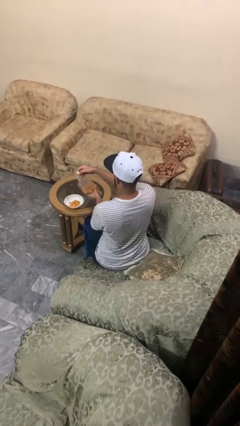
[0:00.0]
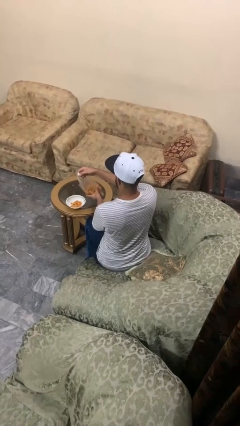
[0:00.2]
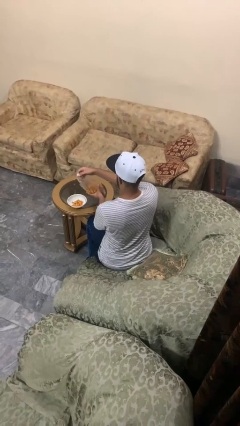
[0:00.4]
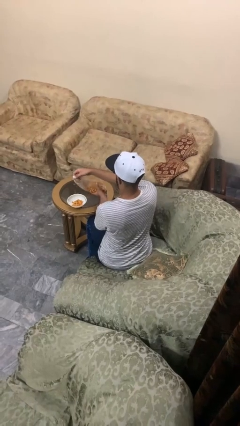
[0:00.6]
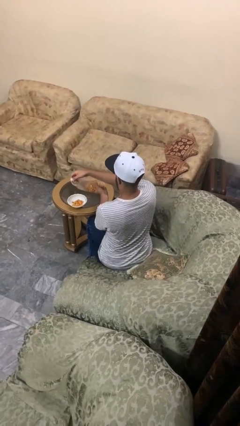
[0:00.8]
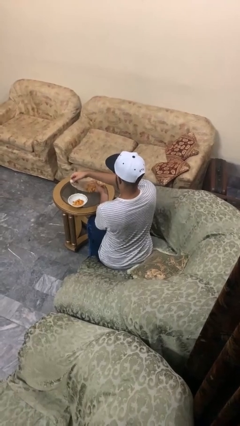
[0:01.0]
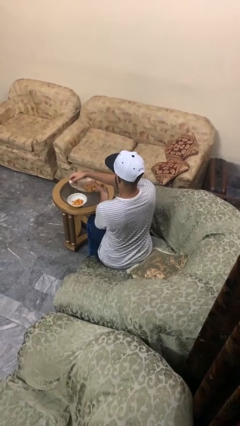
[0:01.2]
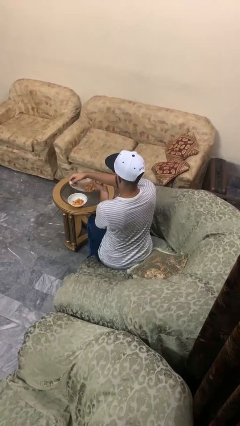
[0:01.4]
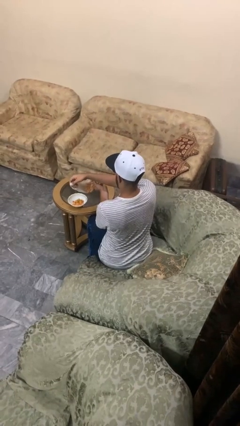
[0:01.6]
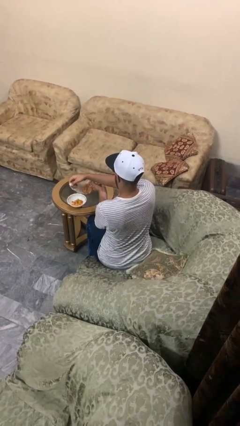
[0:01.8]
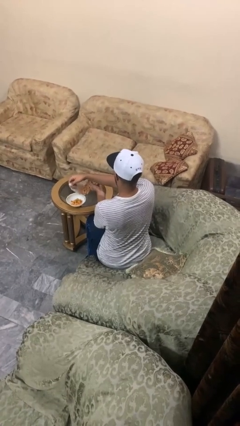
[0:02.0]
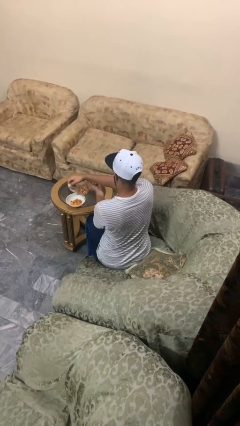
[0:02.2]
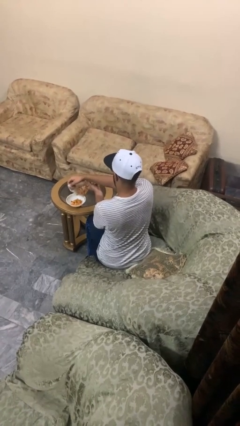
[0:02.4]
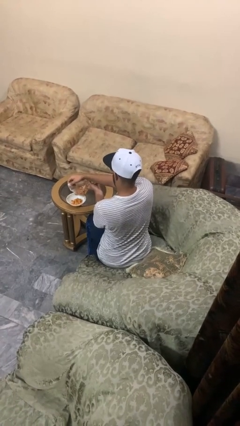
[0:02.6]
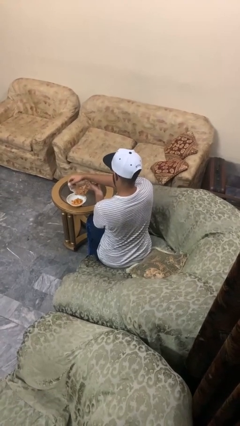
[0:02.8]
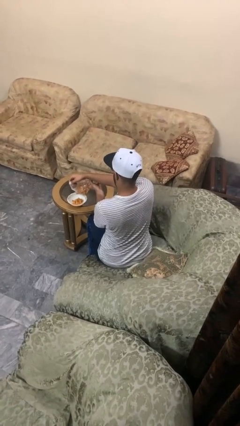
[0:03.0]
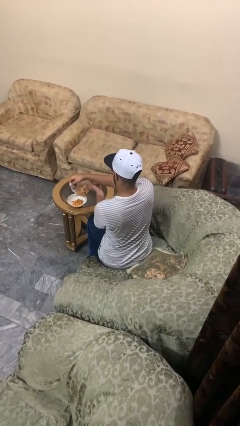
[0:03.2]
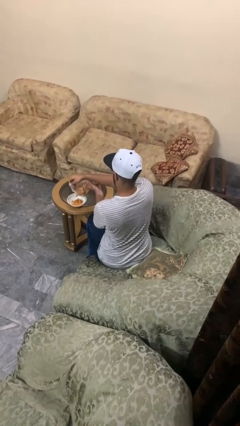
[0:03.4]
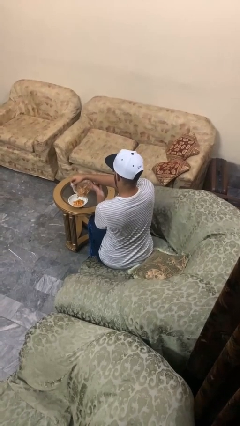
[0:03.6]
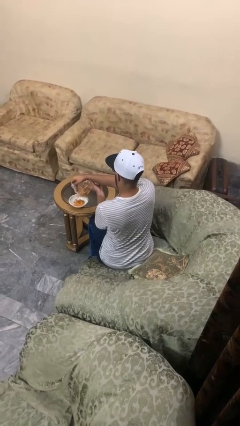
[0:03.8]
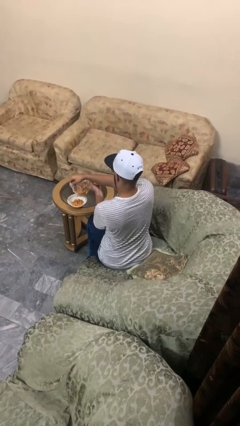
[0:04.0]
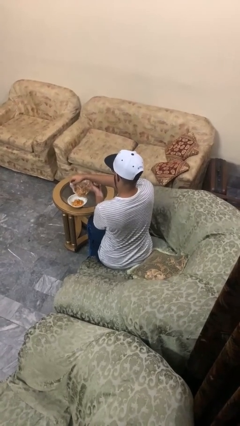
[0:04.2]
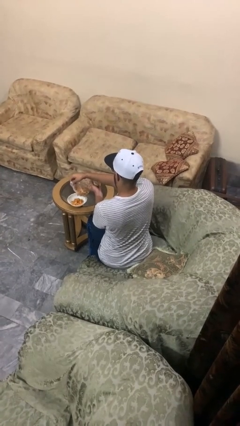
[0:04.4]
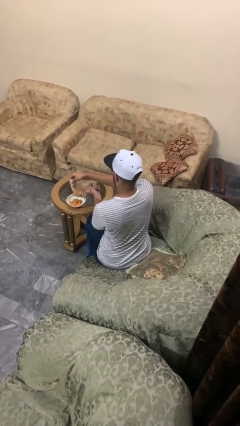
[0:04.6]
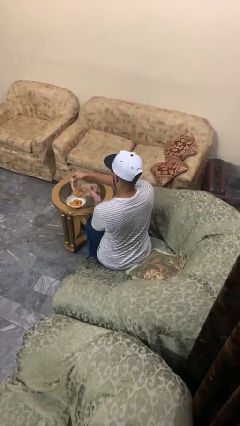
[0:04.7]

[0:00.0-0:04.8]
person pours into bowl

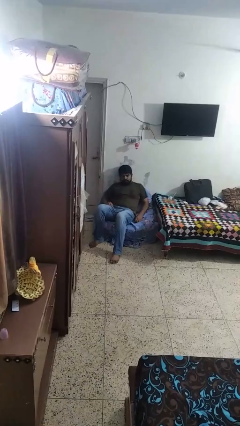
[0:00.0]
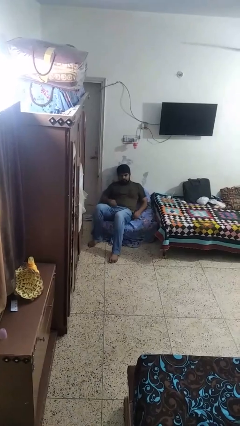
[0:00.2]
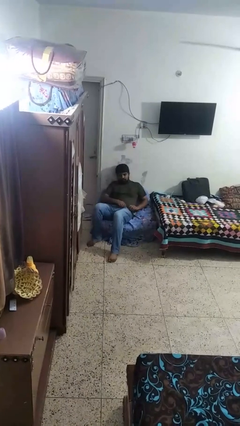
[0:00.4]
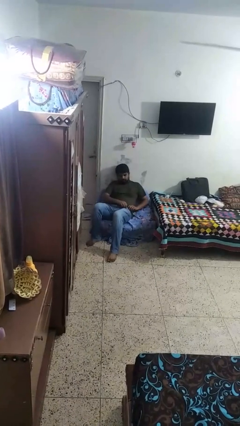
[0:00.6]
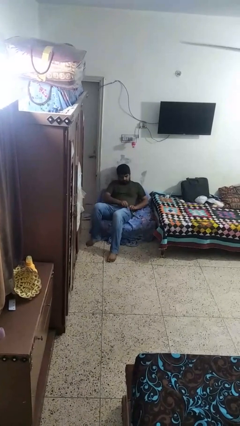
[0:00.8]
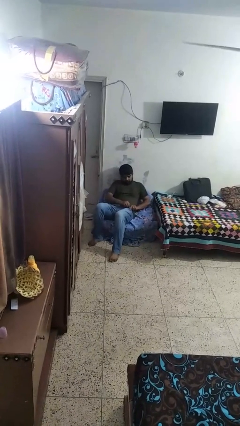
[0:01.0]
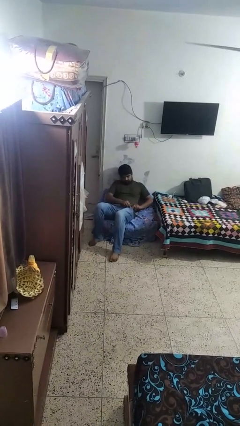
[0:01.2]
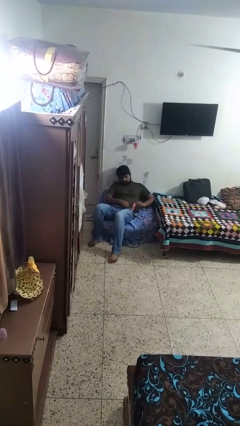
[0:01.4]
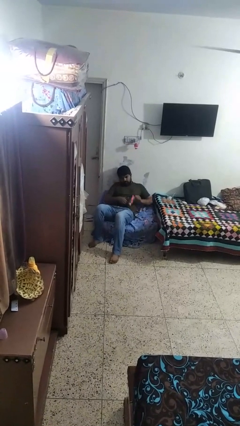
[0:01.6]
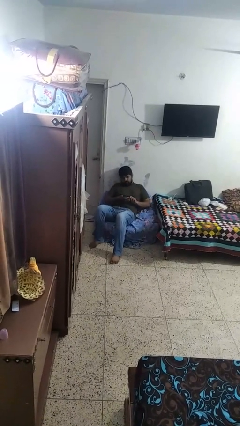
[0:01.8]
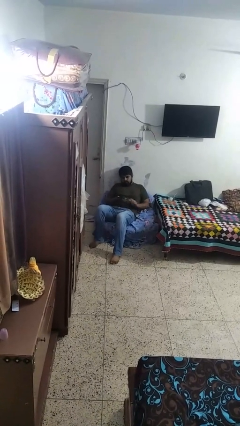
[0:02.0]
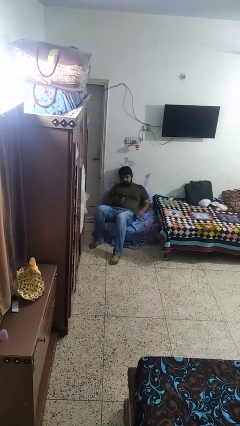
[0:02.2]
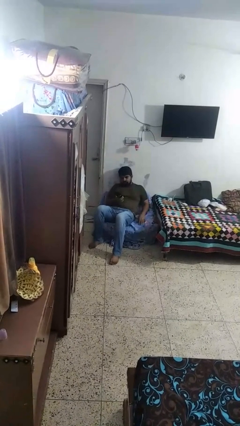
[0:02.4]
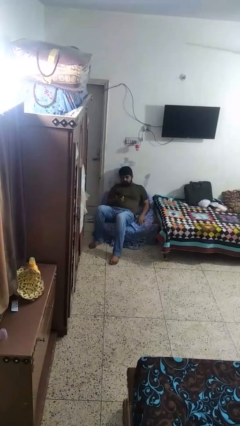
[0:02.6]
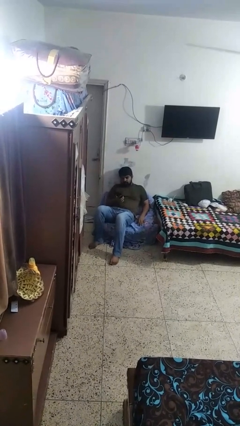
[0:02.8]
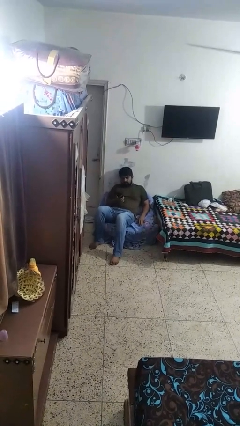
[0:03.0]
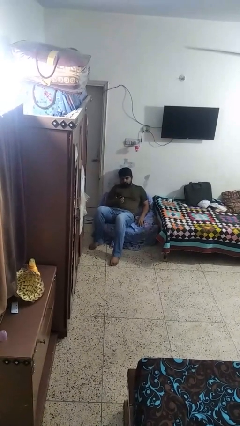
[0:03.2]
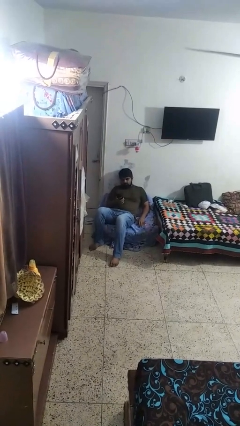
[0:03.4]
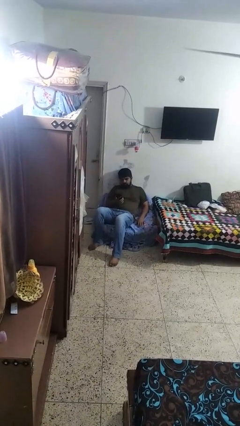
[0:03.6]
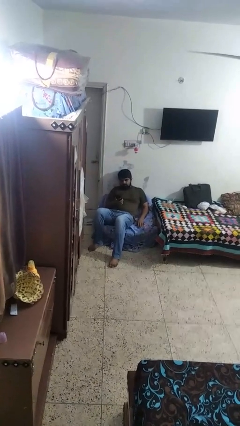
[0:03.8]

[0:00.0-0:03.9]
person takes phone from pocket

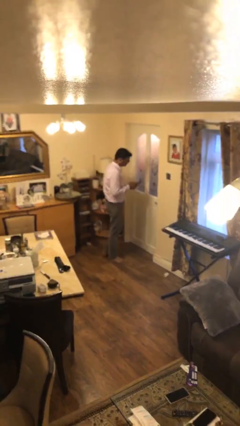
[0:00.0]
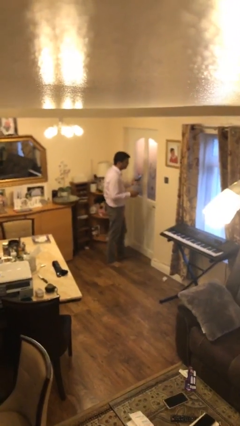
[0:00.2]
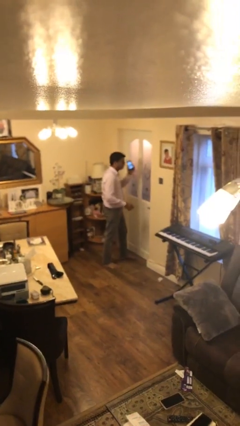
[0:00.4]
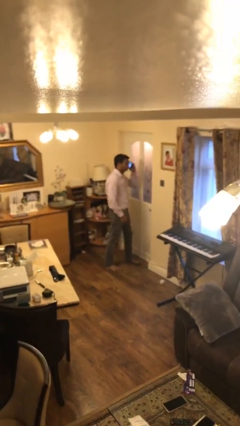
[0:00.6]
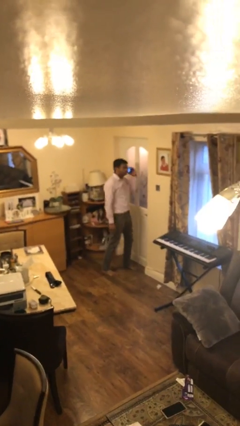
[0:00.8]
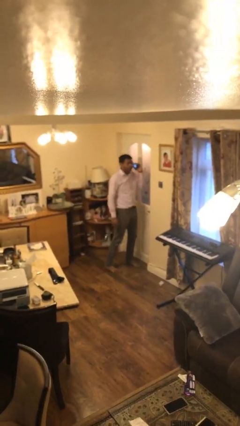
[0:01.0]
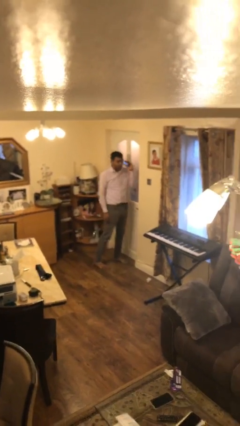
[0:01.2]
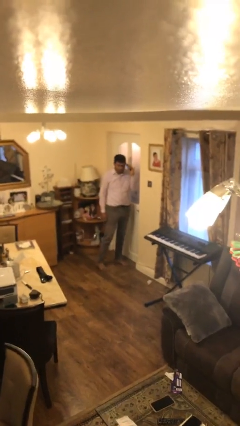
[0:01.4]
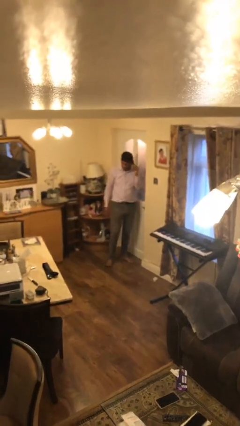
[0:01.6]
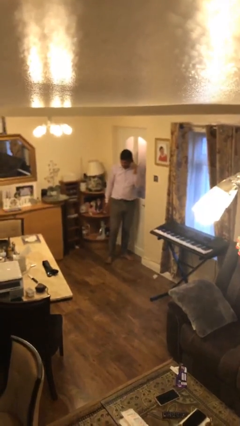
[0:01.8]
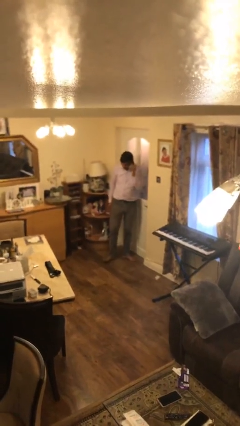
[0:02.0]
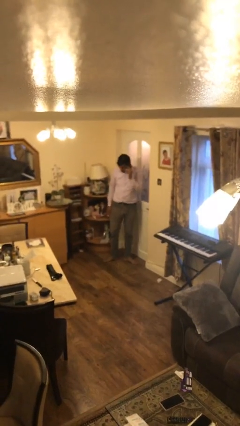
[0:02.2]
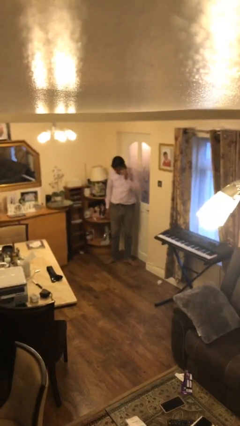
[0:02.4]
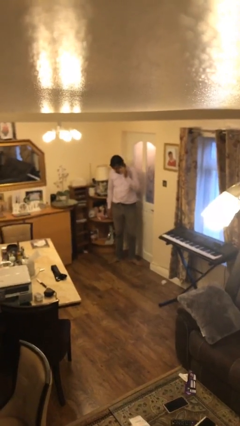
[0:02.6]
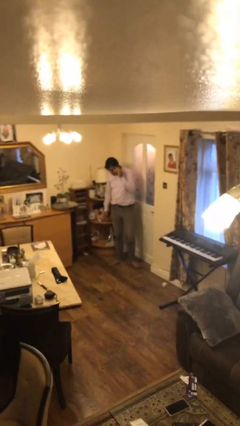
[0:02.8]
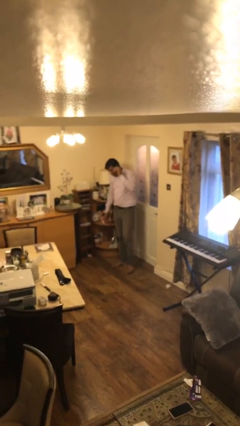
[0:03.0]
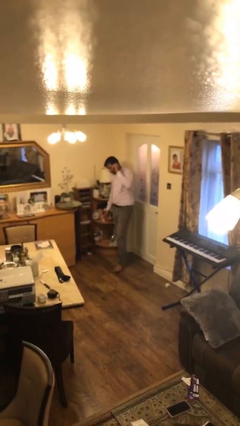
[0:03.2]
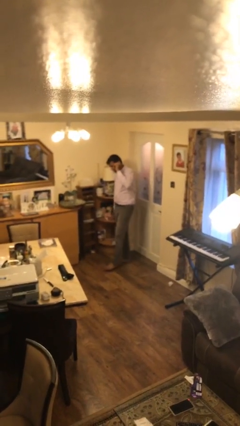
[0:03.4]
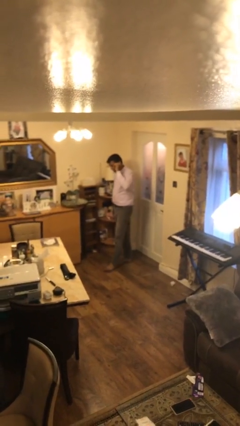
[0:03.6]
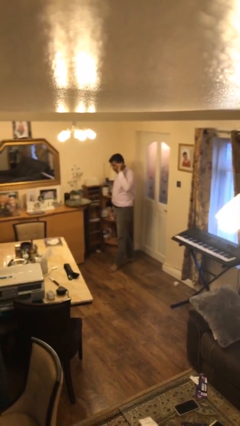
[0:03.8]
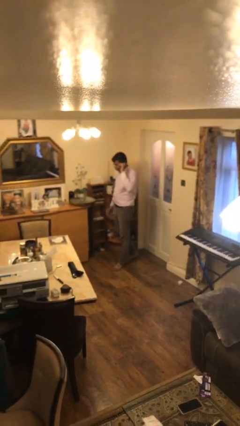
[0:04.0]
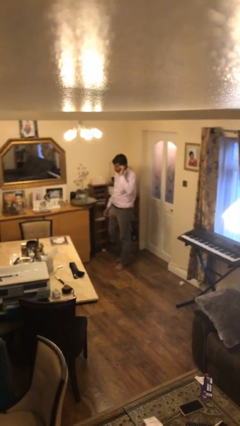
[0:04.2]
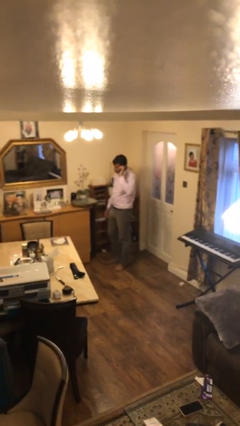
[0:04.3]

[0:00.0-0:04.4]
person talks on phone

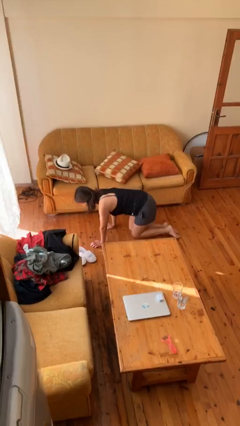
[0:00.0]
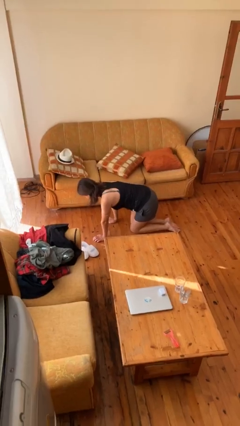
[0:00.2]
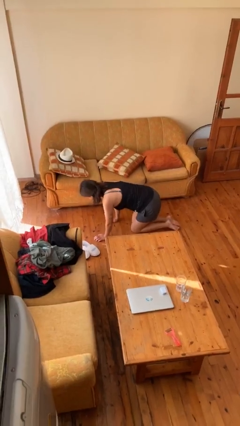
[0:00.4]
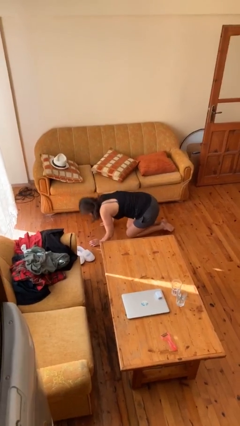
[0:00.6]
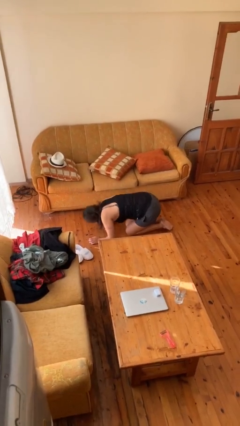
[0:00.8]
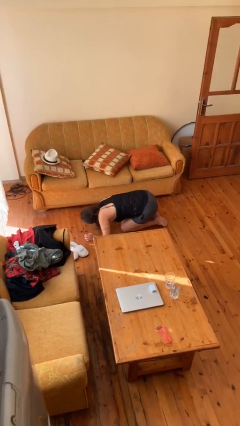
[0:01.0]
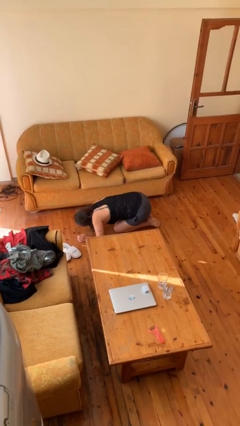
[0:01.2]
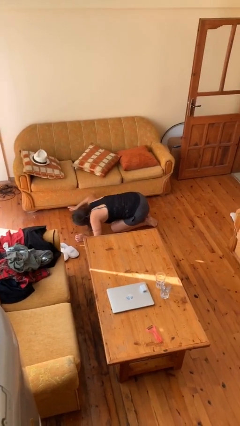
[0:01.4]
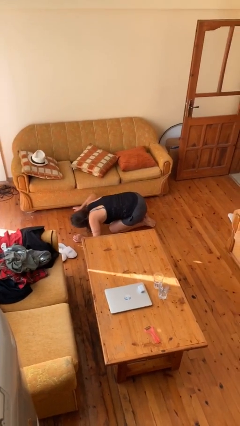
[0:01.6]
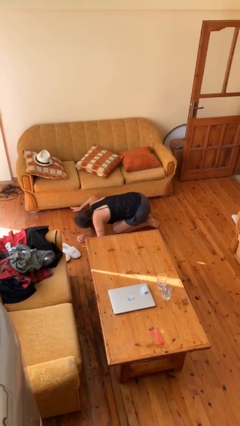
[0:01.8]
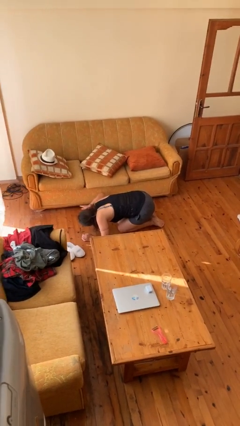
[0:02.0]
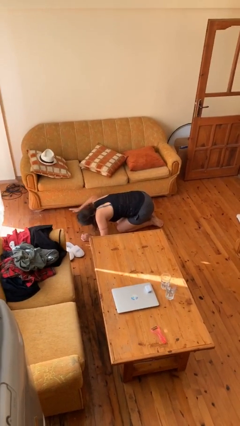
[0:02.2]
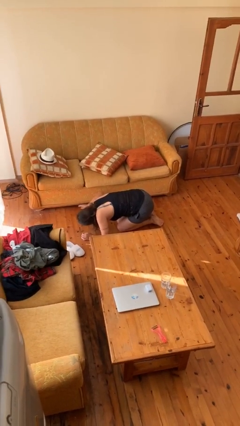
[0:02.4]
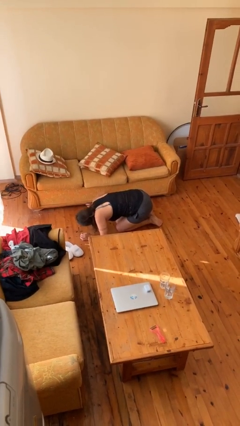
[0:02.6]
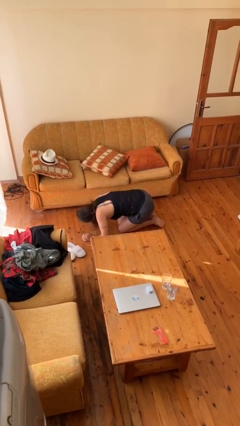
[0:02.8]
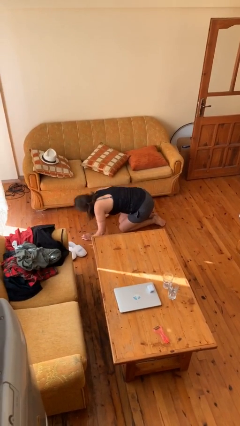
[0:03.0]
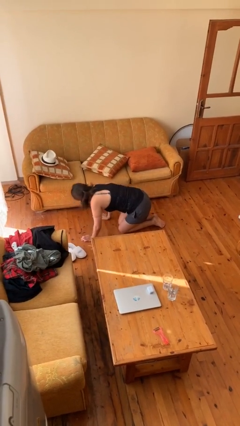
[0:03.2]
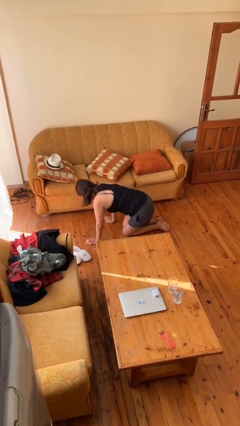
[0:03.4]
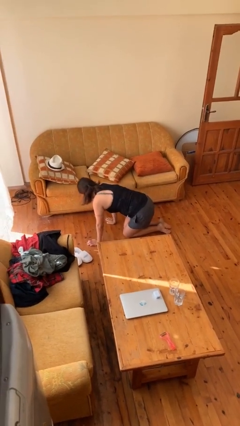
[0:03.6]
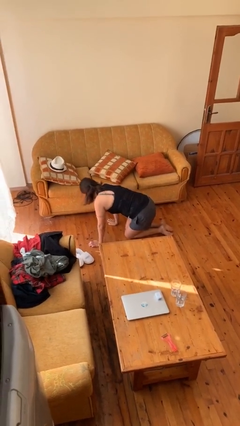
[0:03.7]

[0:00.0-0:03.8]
person searches under couch

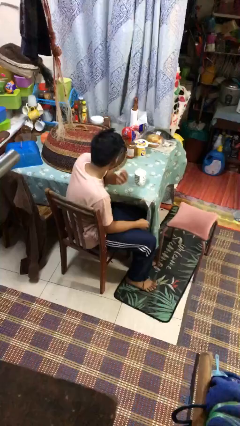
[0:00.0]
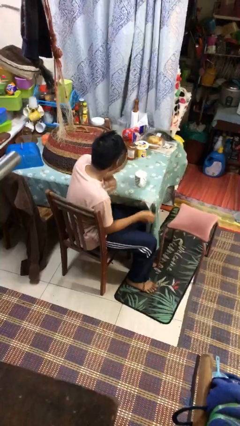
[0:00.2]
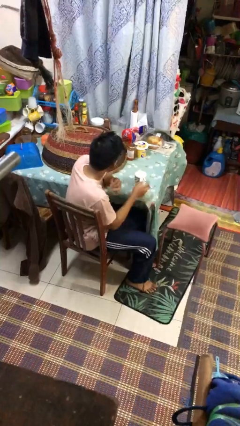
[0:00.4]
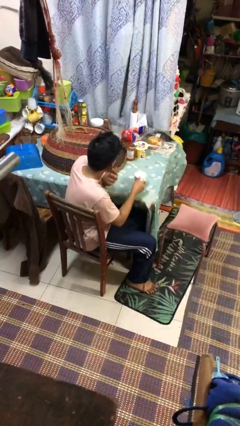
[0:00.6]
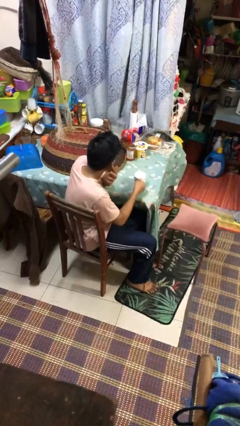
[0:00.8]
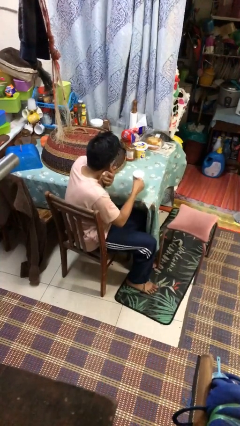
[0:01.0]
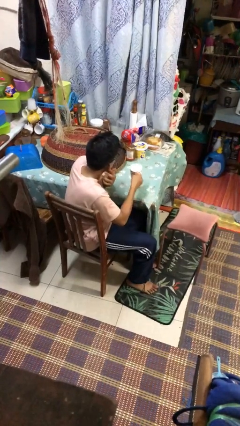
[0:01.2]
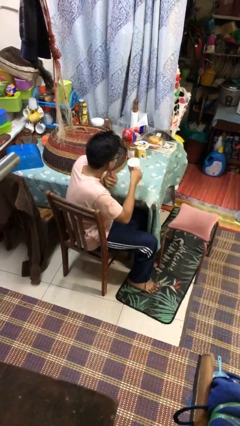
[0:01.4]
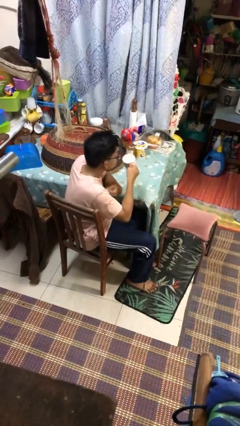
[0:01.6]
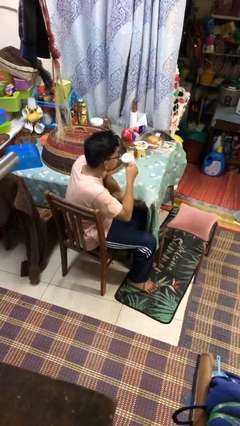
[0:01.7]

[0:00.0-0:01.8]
person picks up object from table
